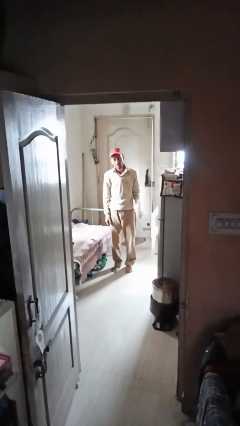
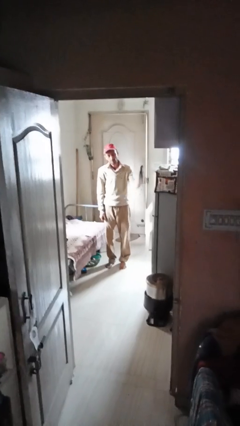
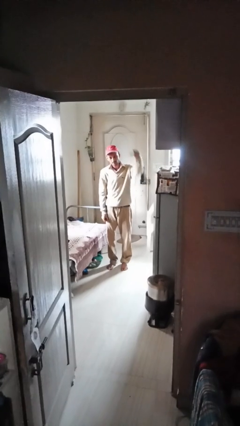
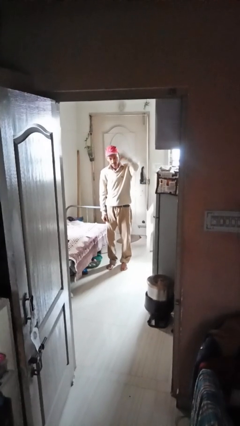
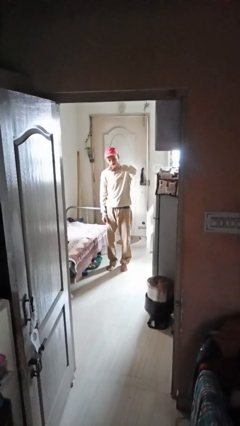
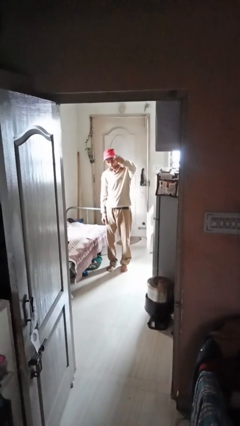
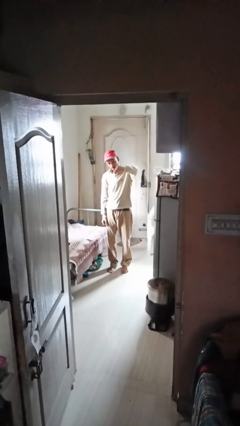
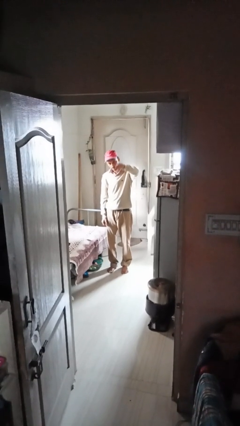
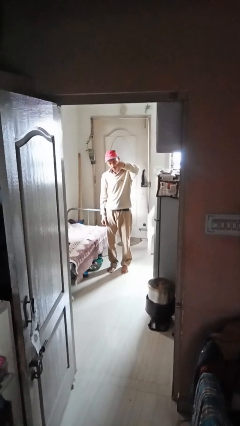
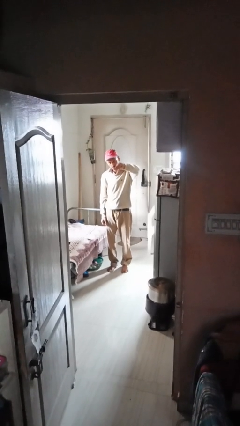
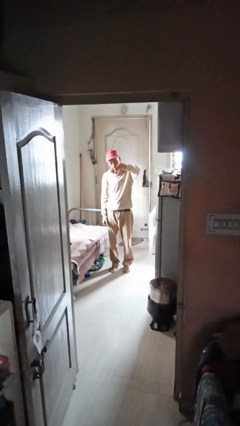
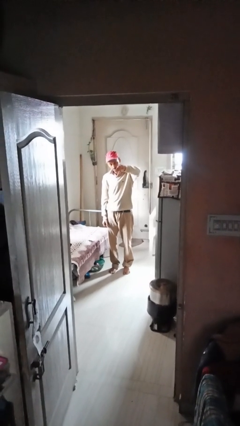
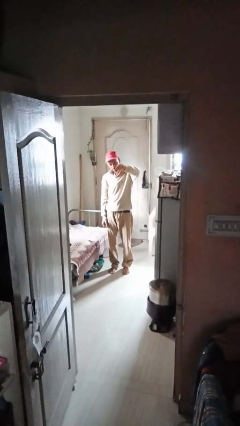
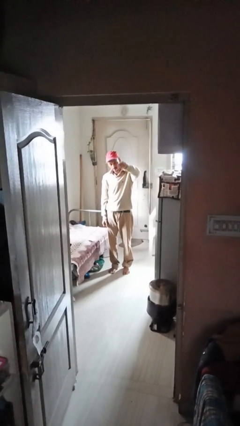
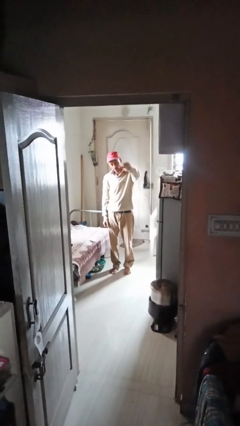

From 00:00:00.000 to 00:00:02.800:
person gestures thumbs down

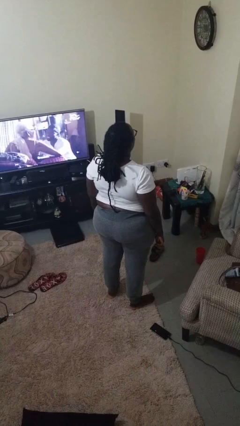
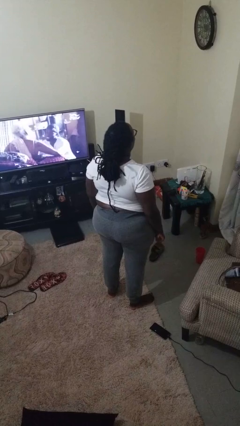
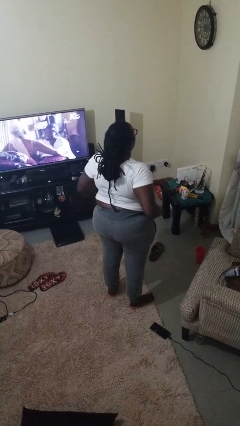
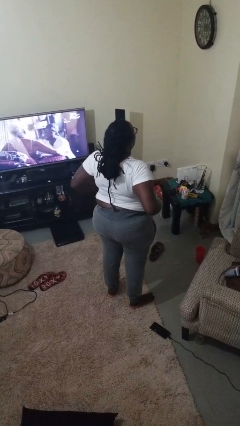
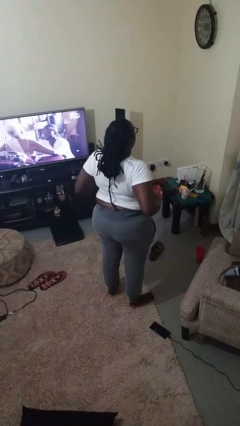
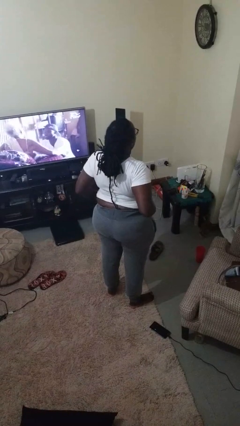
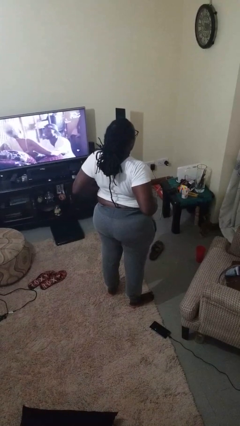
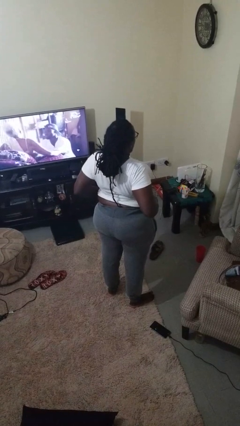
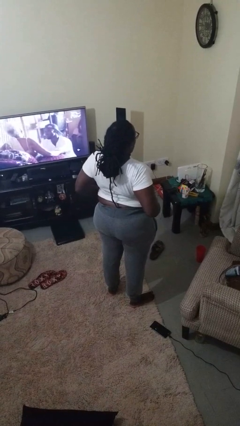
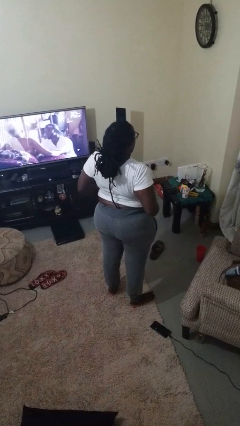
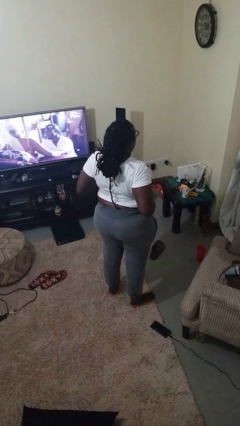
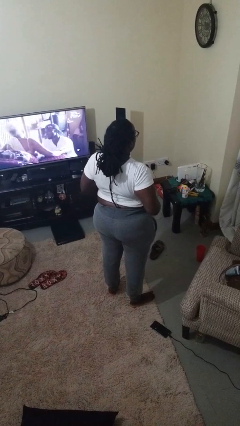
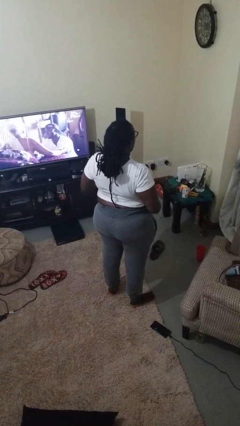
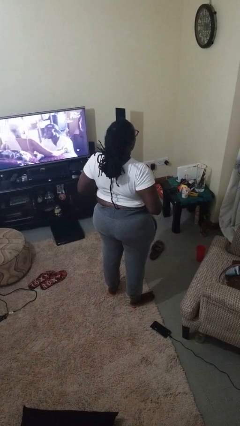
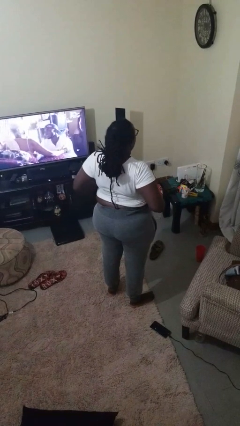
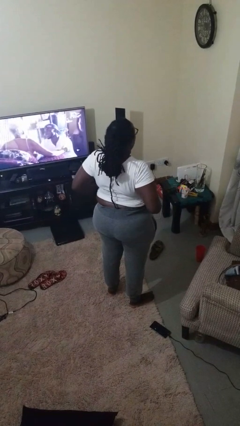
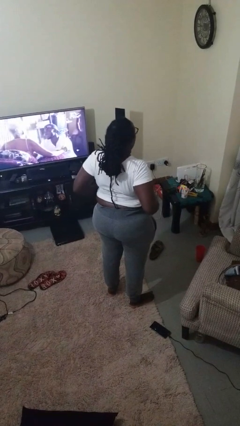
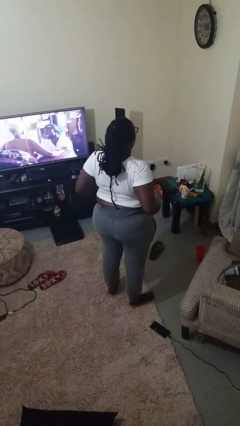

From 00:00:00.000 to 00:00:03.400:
person hikes up pants

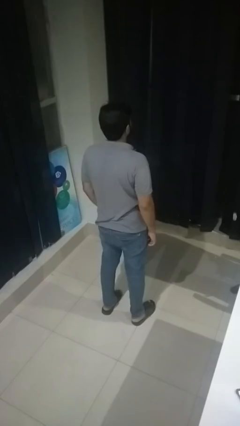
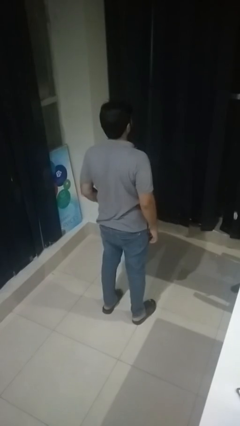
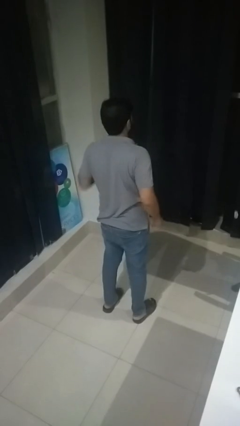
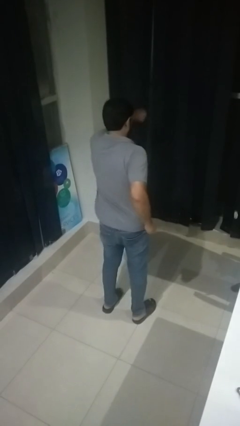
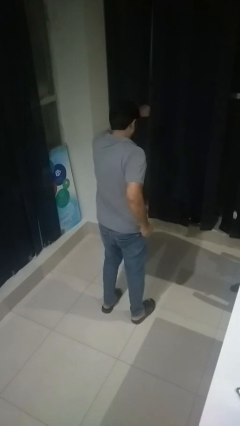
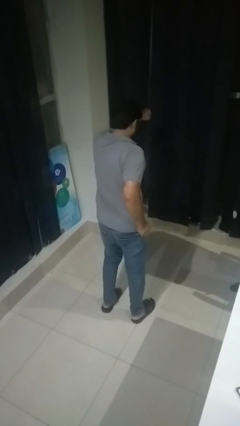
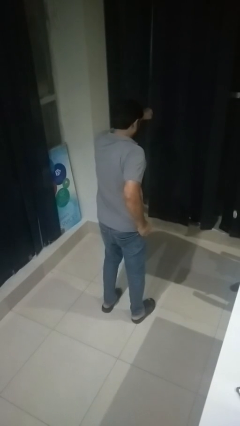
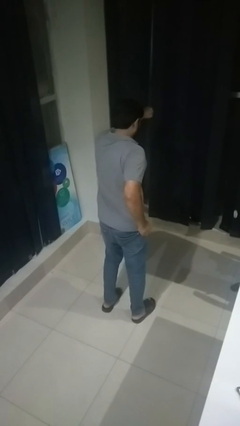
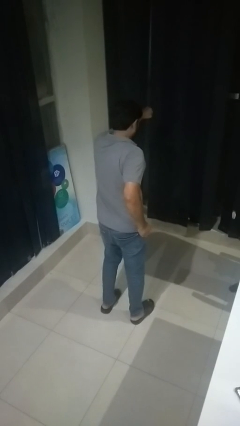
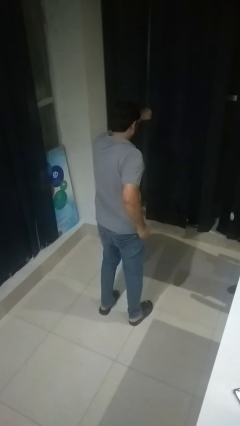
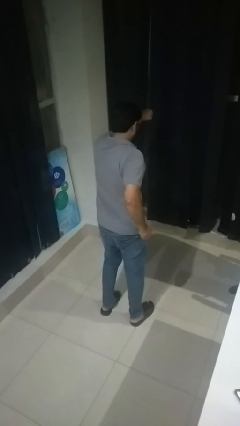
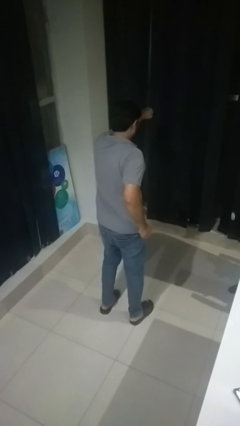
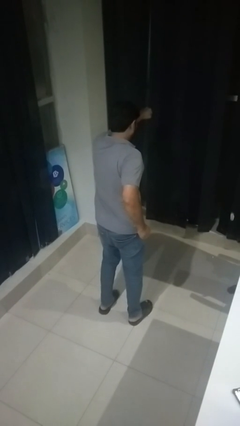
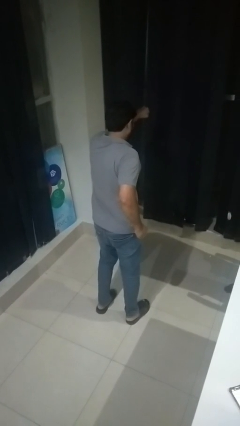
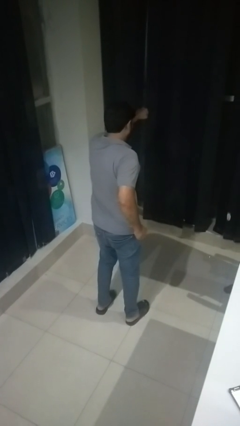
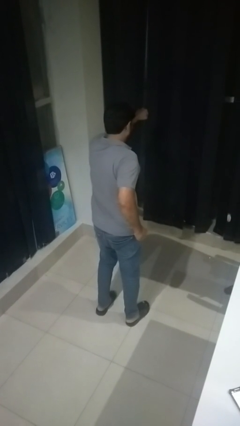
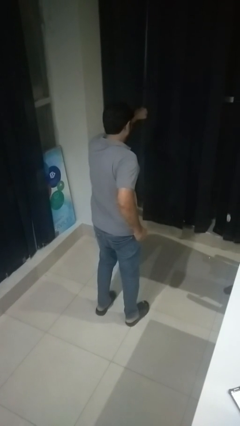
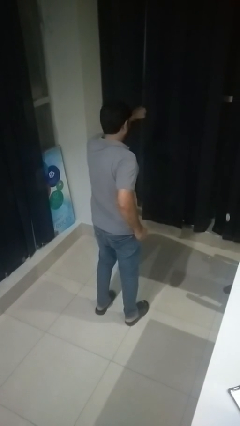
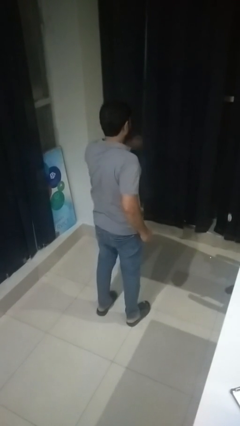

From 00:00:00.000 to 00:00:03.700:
person punches

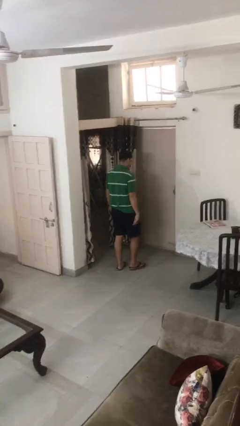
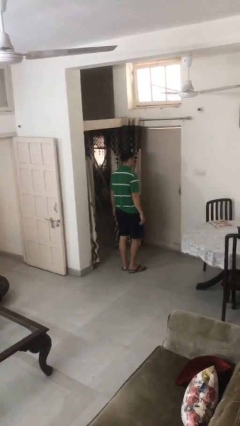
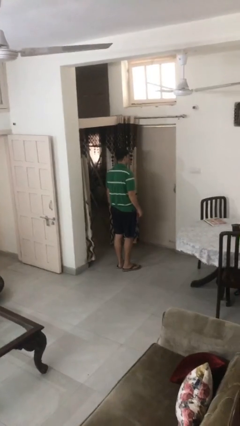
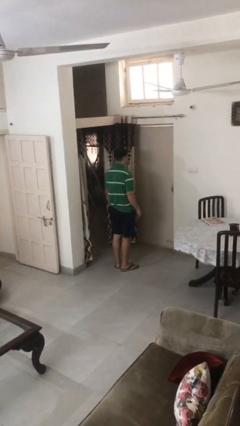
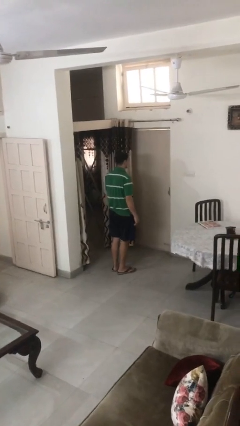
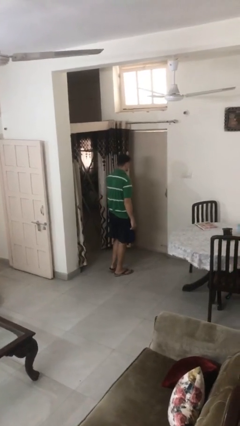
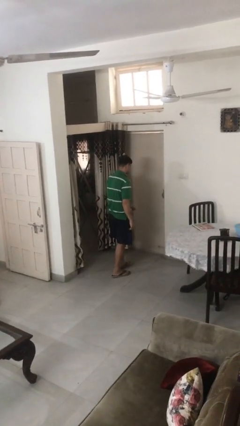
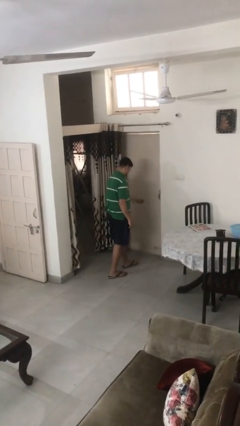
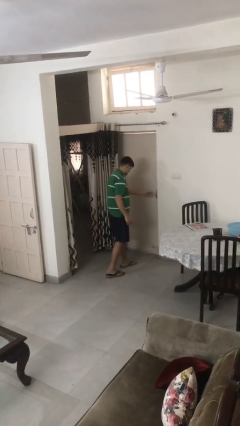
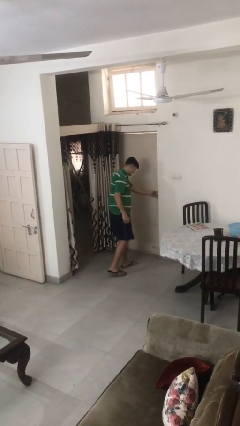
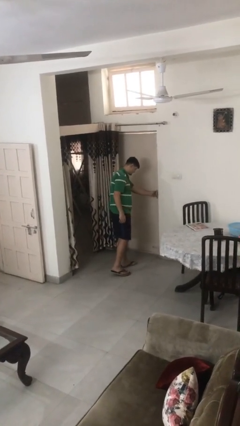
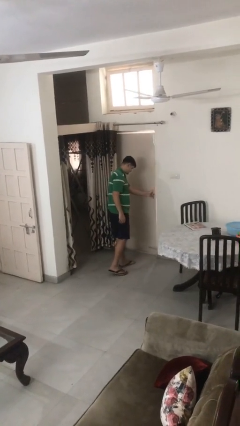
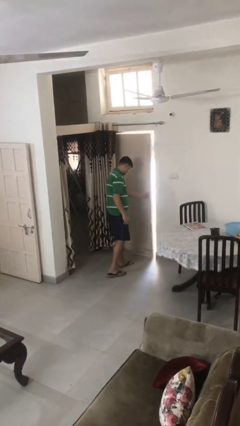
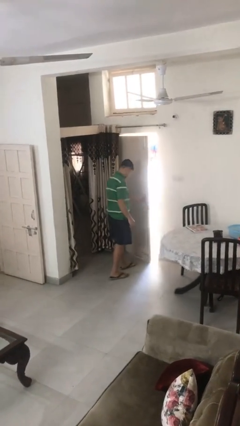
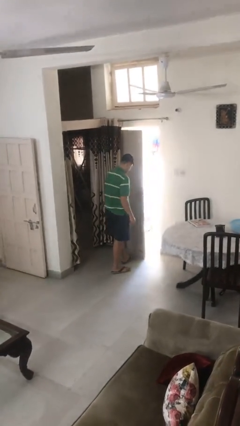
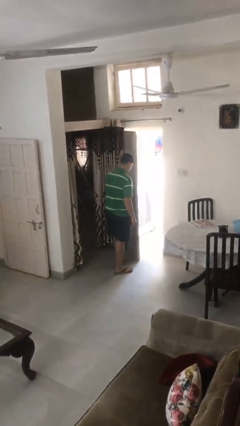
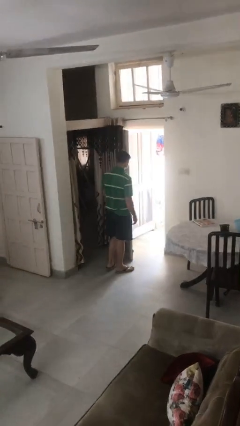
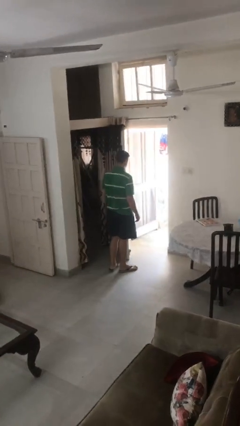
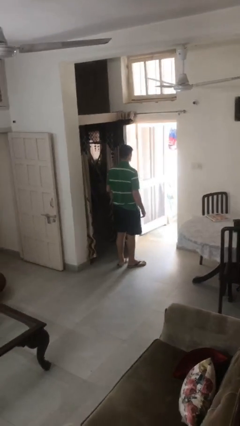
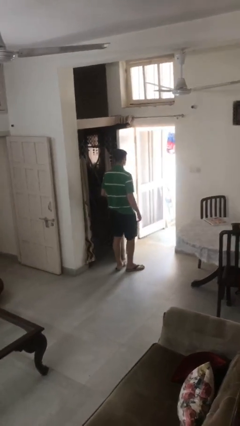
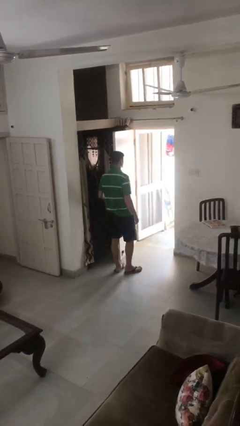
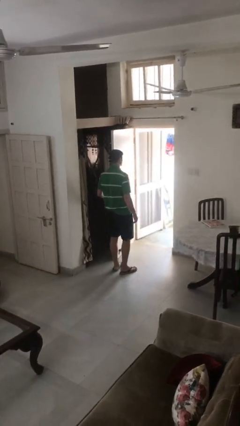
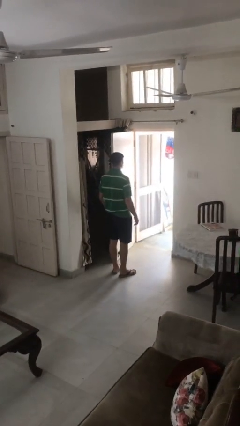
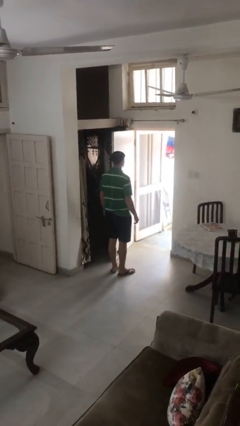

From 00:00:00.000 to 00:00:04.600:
person opens facility door

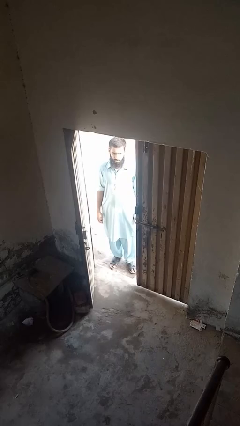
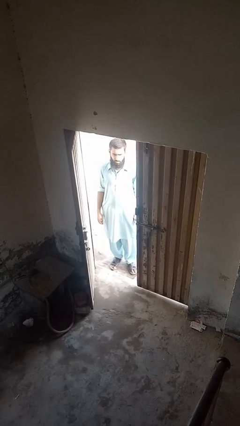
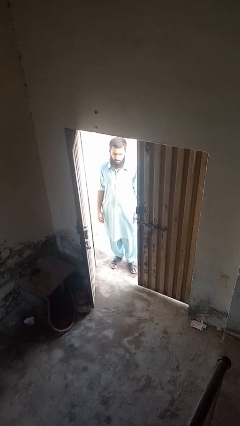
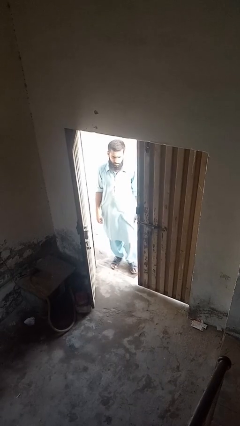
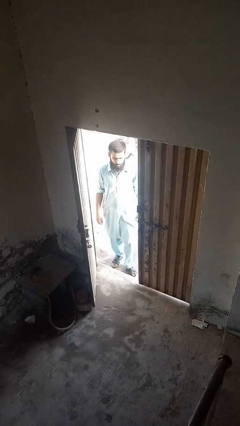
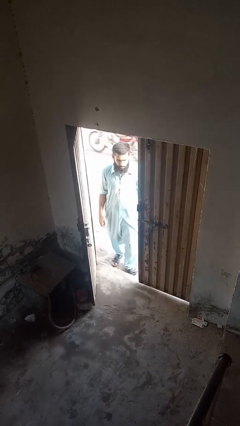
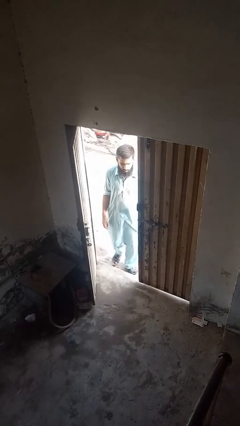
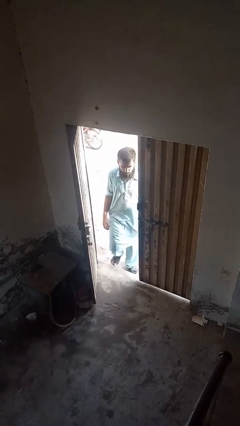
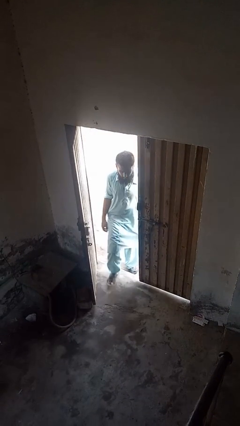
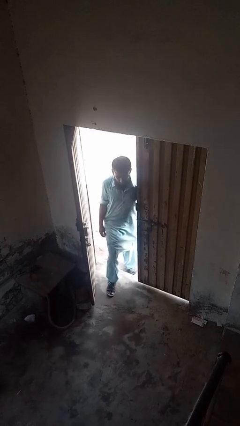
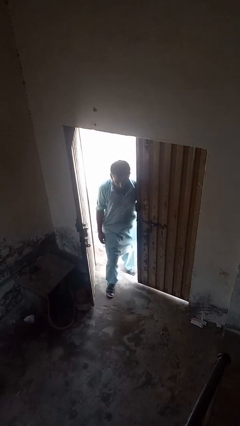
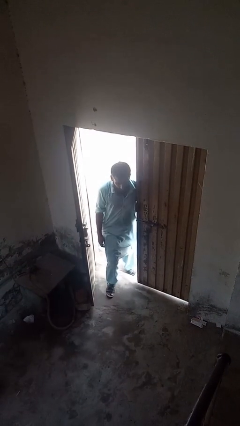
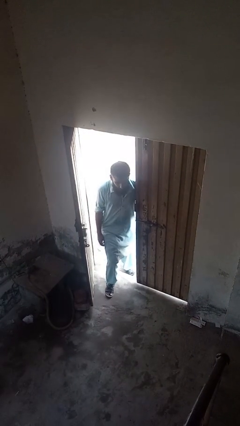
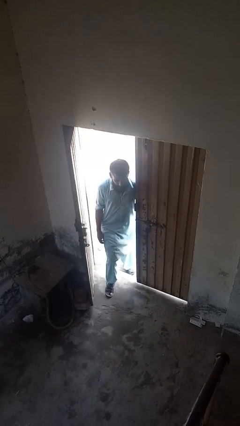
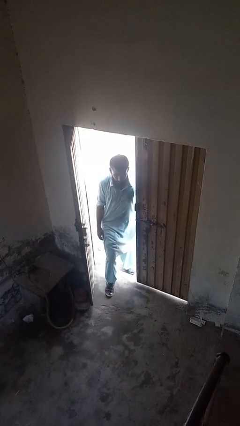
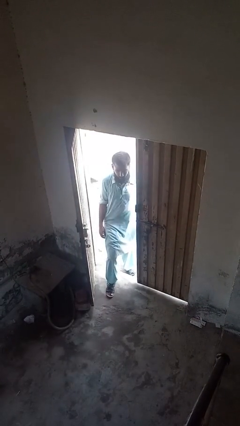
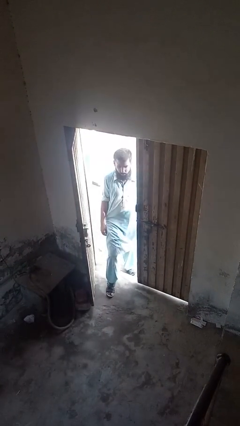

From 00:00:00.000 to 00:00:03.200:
person bumps into wall
